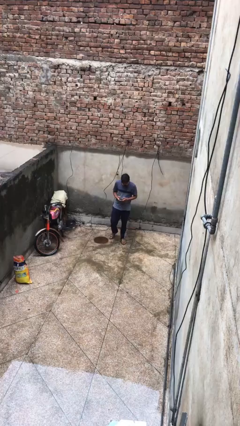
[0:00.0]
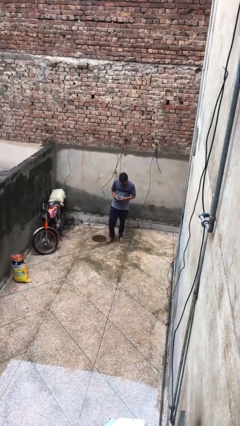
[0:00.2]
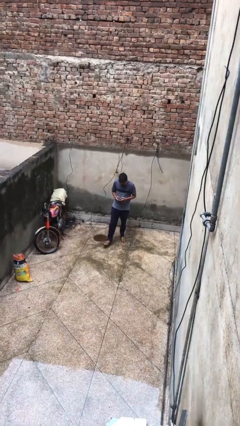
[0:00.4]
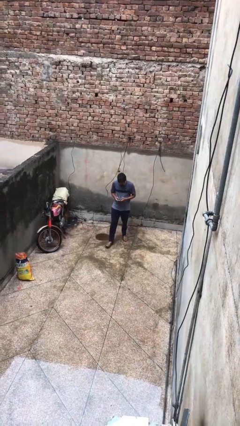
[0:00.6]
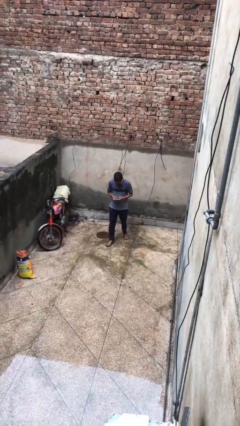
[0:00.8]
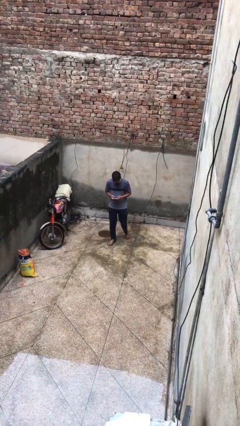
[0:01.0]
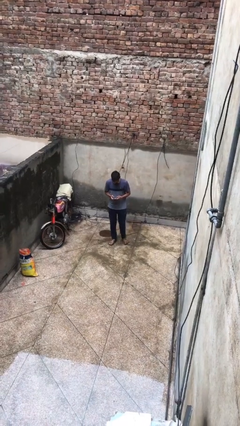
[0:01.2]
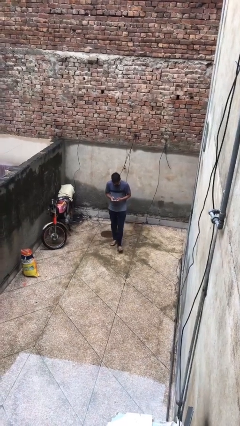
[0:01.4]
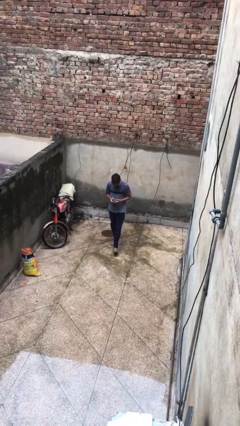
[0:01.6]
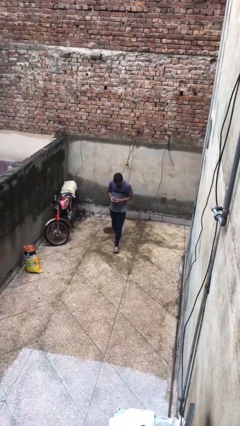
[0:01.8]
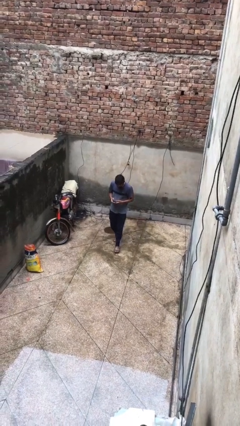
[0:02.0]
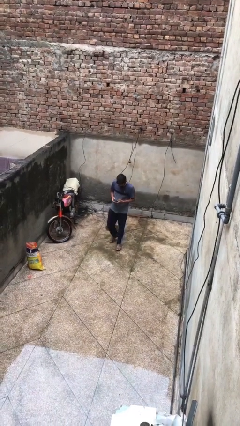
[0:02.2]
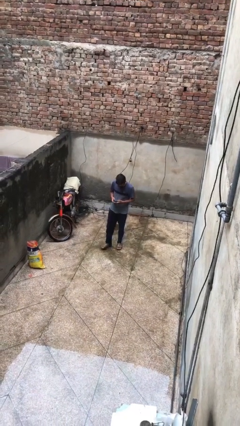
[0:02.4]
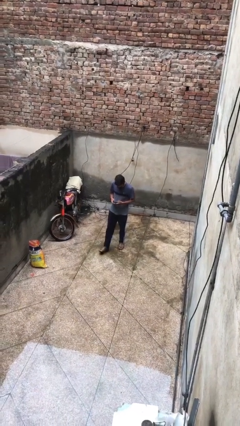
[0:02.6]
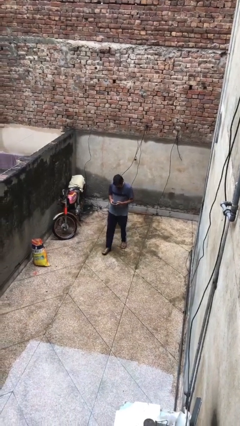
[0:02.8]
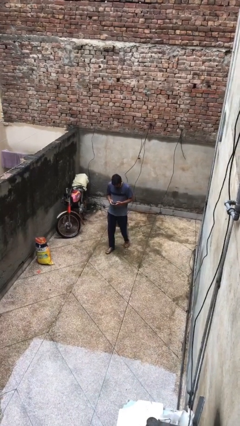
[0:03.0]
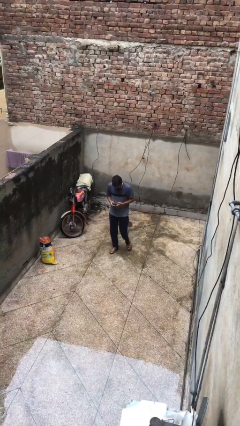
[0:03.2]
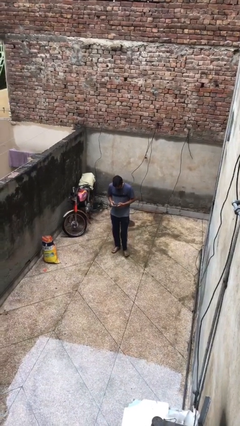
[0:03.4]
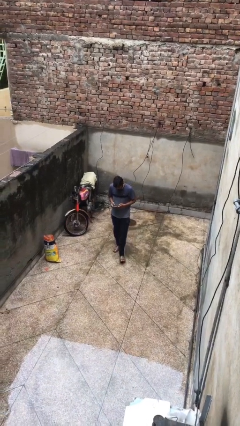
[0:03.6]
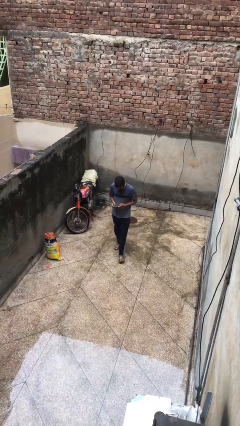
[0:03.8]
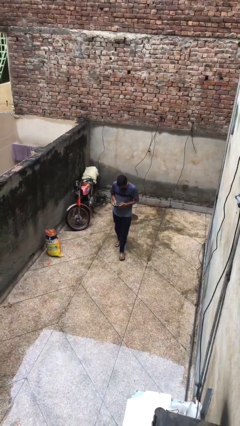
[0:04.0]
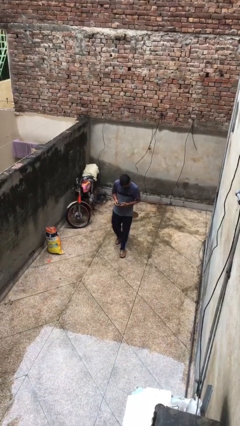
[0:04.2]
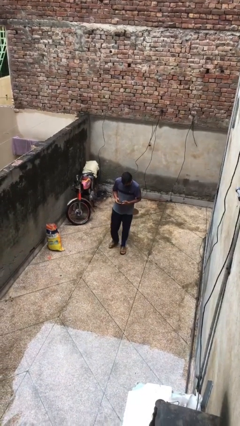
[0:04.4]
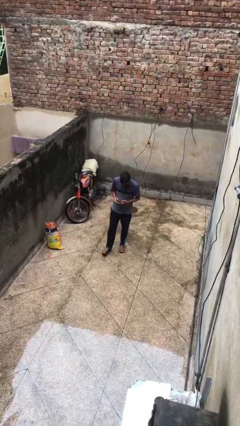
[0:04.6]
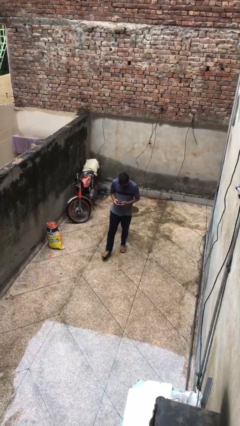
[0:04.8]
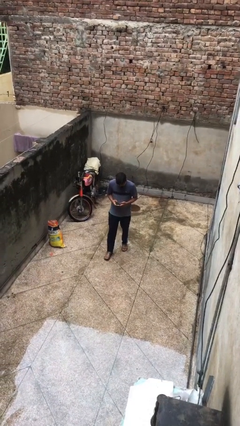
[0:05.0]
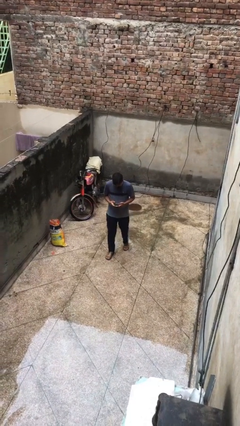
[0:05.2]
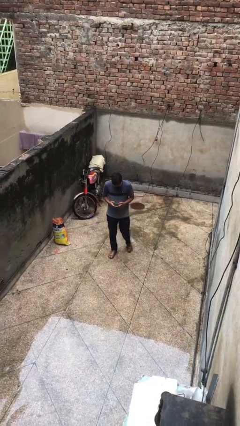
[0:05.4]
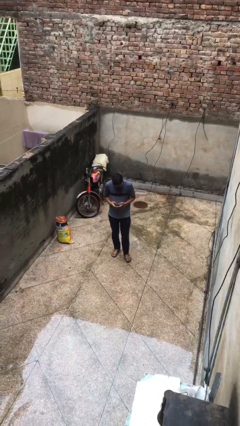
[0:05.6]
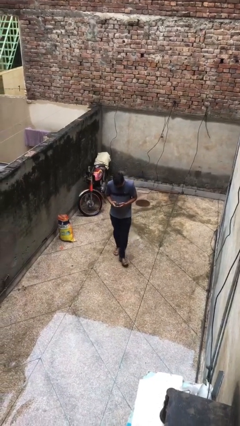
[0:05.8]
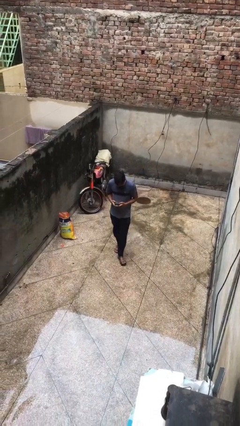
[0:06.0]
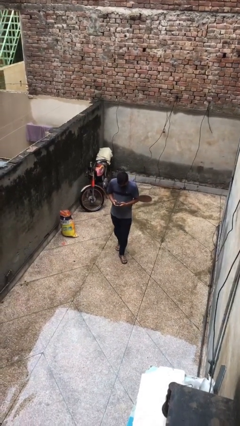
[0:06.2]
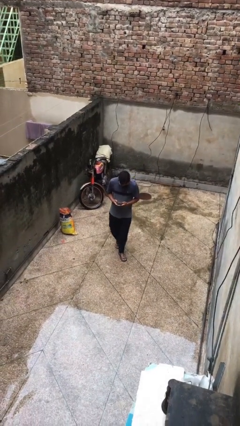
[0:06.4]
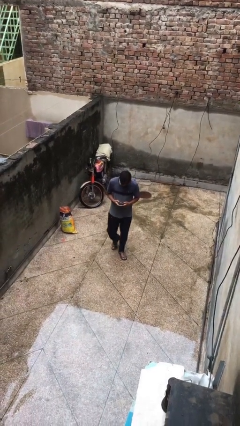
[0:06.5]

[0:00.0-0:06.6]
person texts on phone

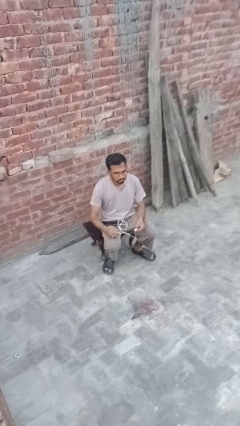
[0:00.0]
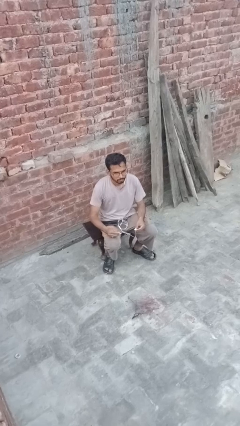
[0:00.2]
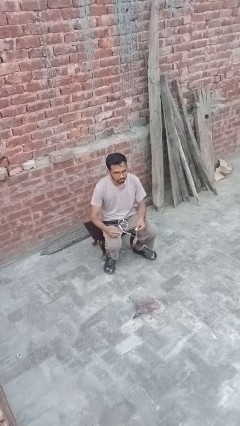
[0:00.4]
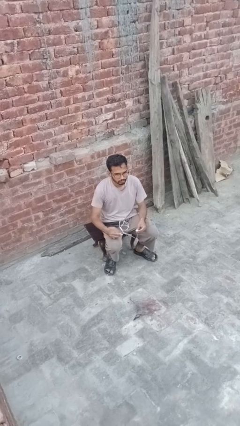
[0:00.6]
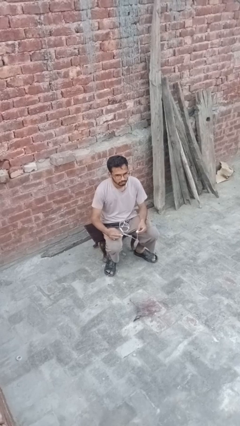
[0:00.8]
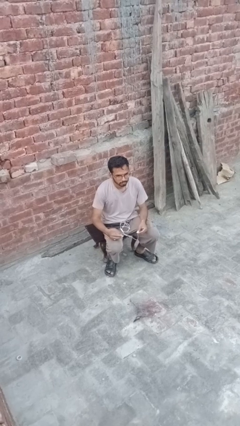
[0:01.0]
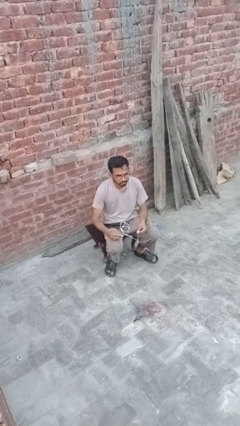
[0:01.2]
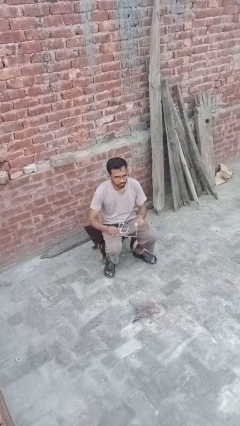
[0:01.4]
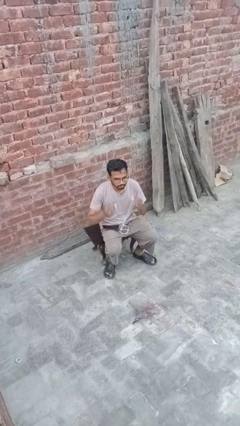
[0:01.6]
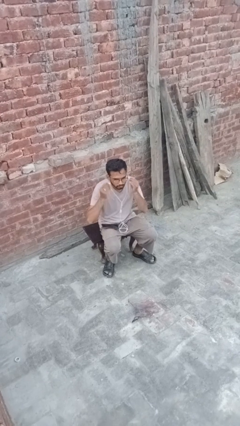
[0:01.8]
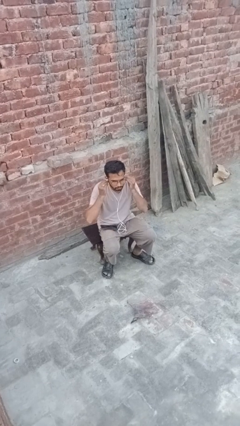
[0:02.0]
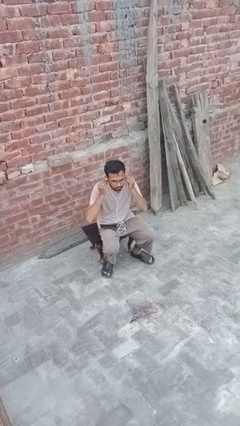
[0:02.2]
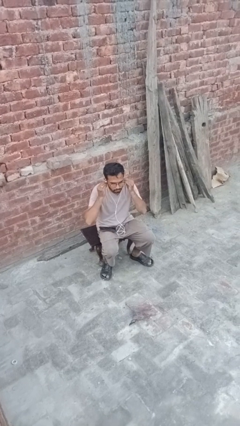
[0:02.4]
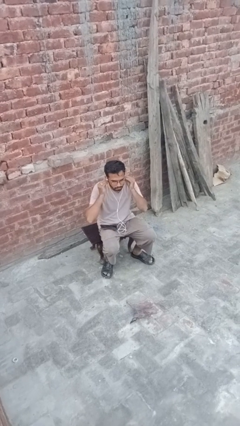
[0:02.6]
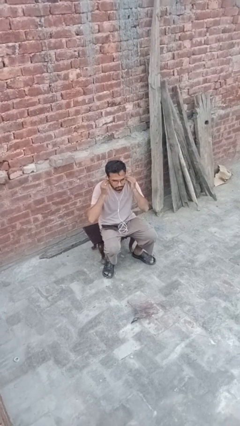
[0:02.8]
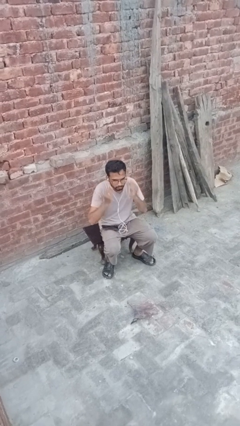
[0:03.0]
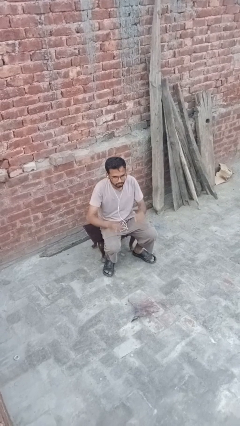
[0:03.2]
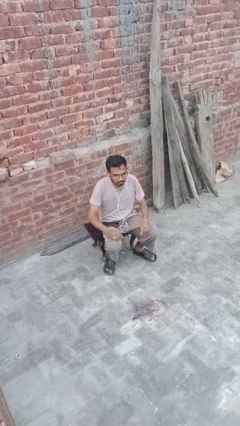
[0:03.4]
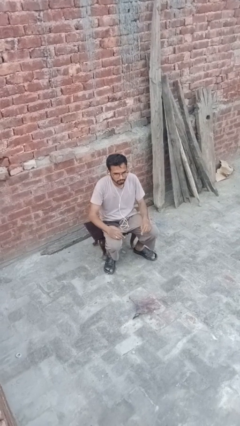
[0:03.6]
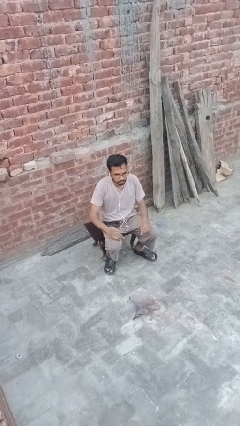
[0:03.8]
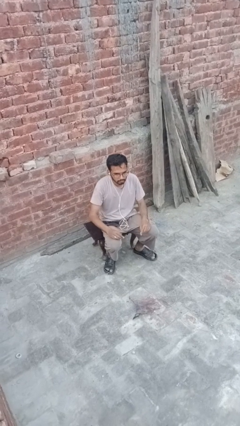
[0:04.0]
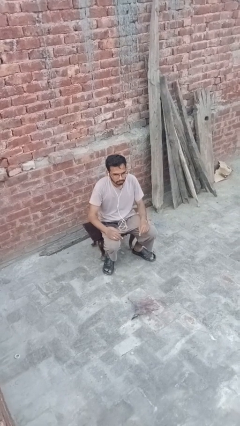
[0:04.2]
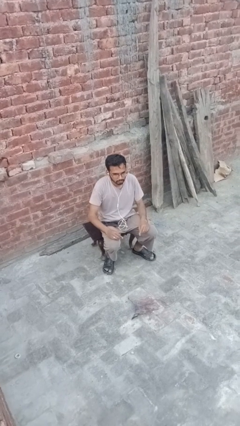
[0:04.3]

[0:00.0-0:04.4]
person puts on headphones

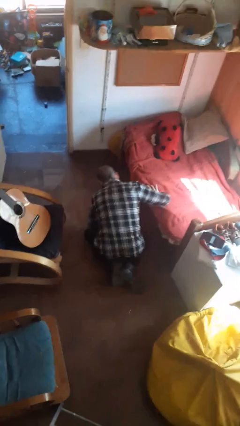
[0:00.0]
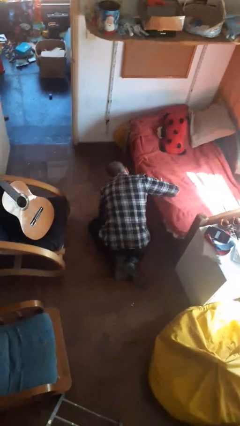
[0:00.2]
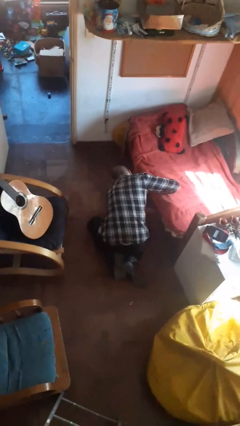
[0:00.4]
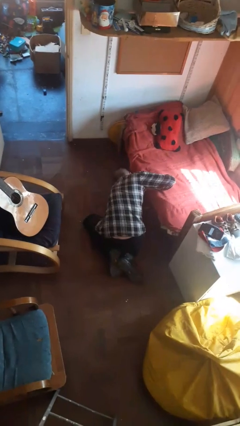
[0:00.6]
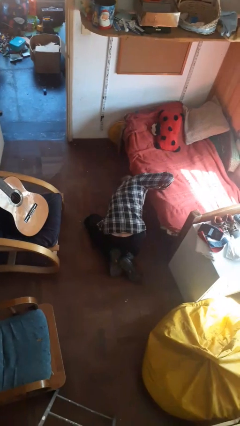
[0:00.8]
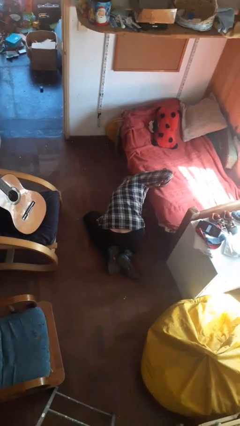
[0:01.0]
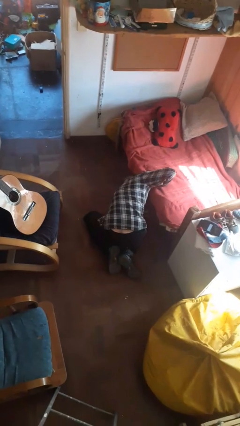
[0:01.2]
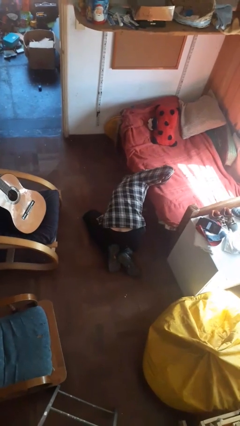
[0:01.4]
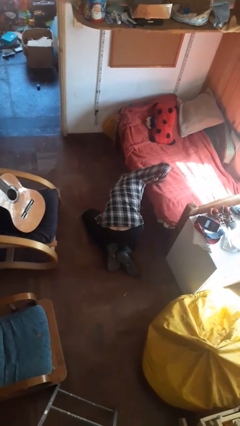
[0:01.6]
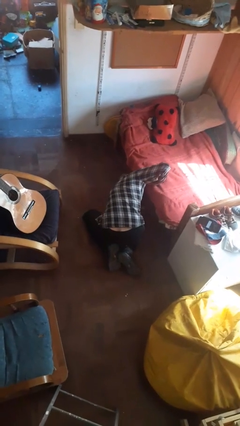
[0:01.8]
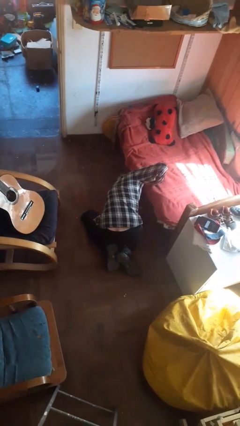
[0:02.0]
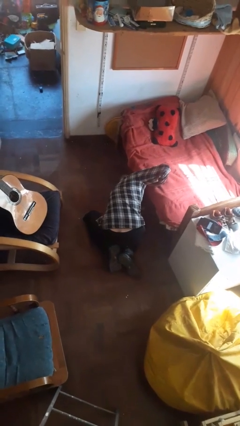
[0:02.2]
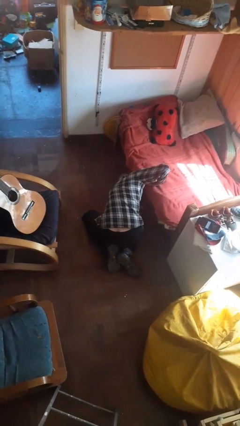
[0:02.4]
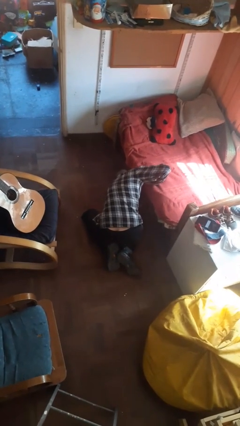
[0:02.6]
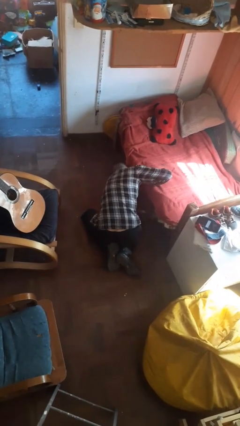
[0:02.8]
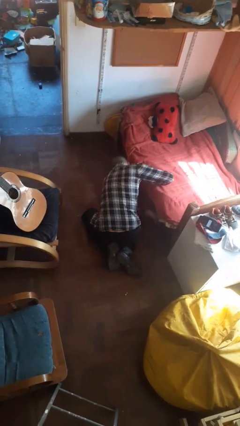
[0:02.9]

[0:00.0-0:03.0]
person searches under bed

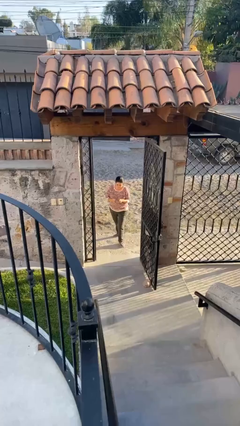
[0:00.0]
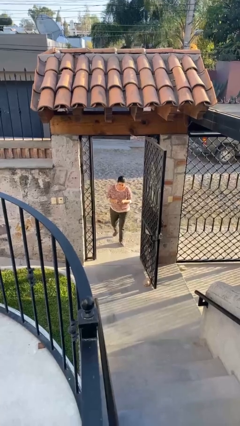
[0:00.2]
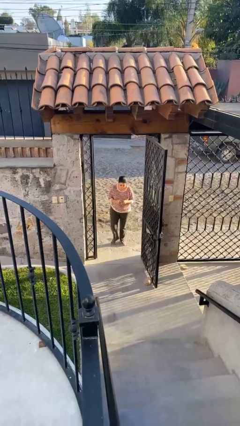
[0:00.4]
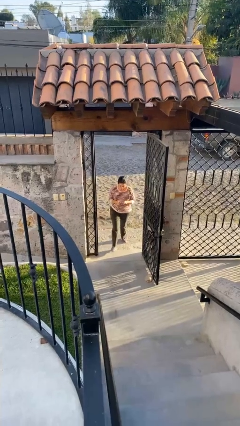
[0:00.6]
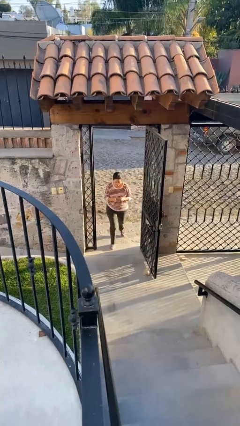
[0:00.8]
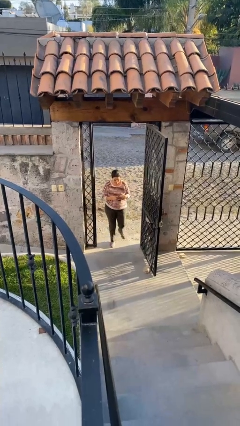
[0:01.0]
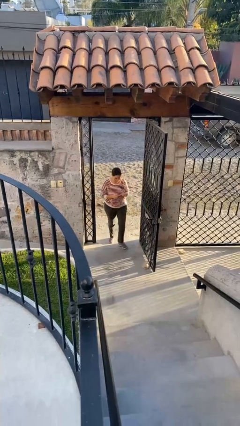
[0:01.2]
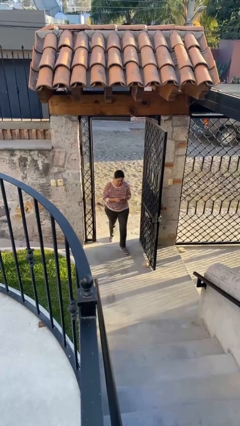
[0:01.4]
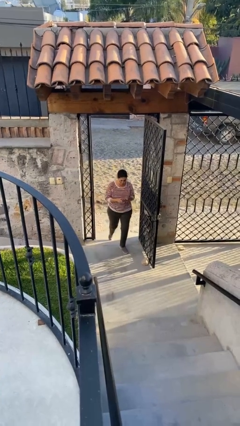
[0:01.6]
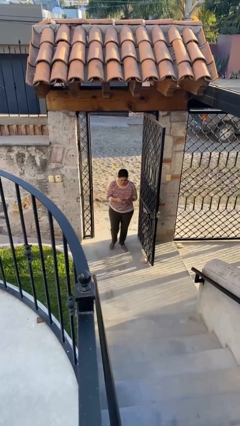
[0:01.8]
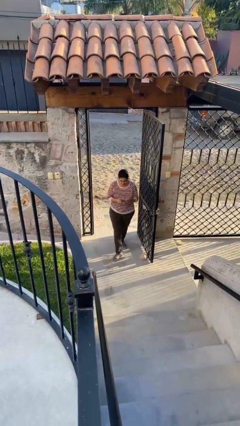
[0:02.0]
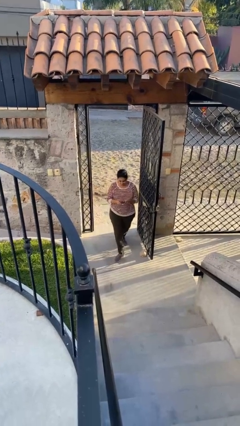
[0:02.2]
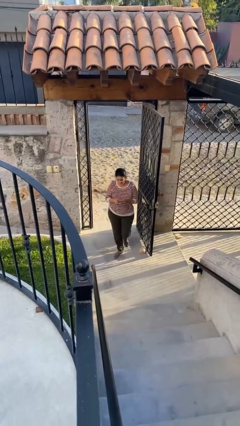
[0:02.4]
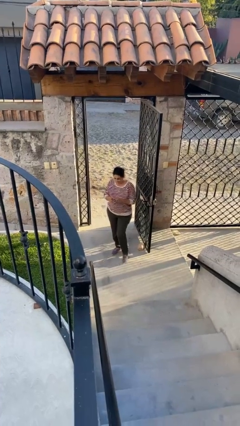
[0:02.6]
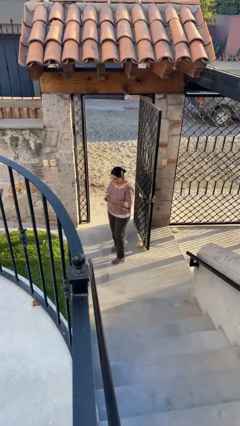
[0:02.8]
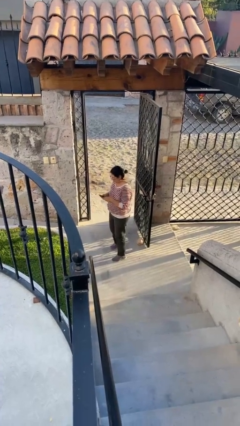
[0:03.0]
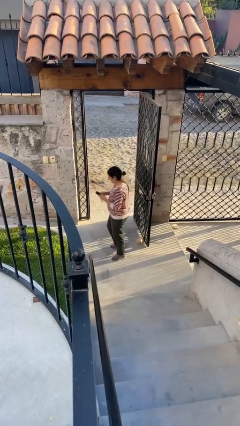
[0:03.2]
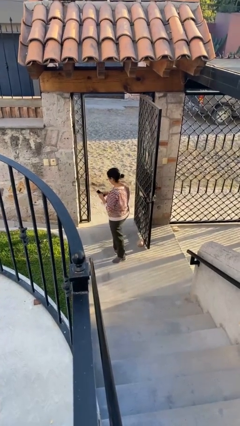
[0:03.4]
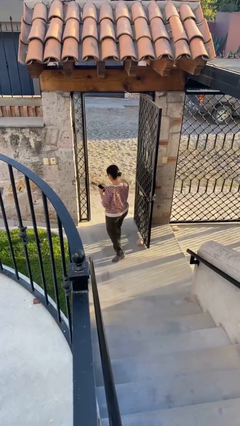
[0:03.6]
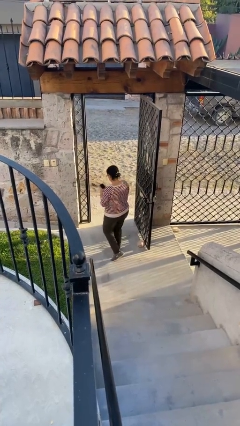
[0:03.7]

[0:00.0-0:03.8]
person enters scene through structure
